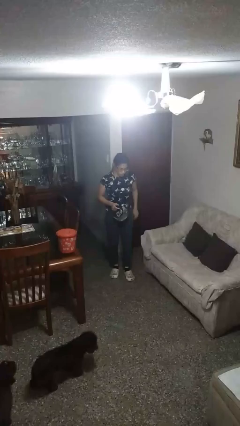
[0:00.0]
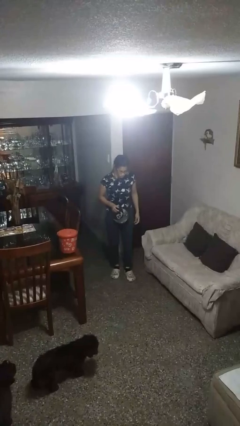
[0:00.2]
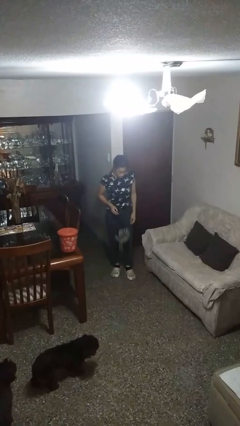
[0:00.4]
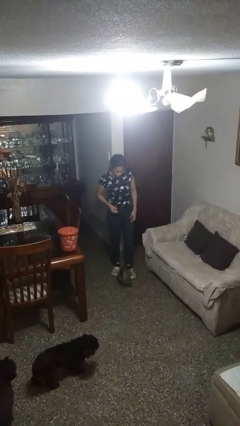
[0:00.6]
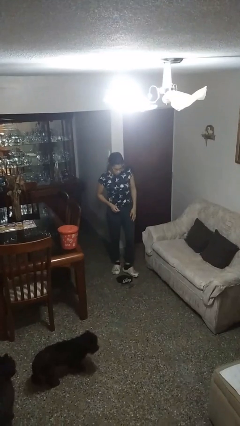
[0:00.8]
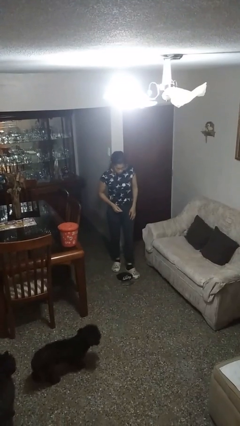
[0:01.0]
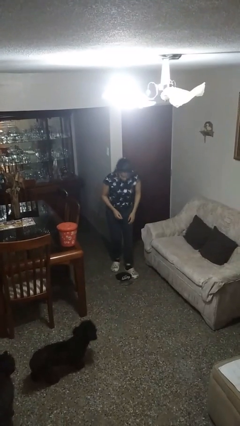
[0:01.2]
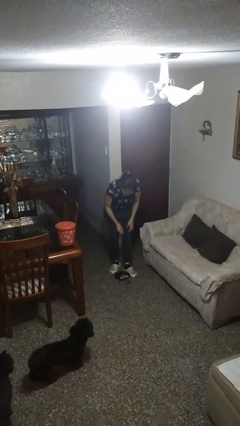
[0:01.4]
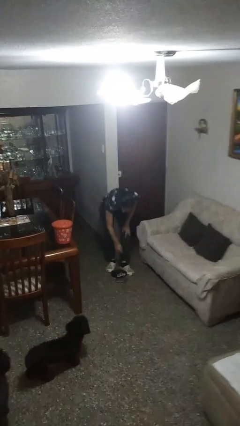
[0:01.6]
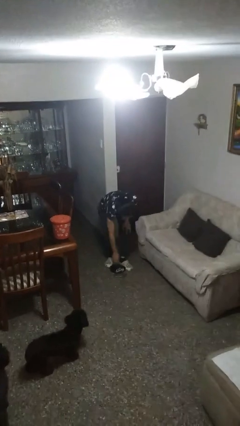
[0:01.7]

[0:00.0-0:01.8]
person drops object

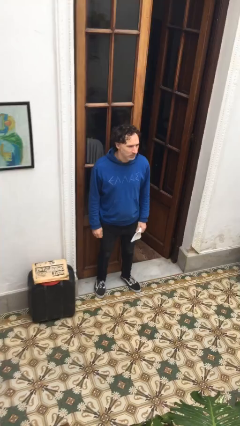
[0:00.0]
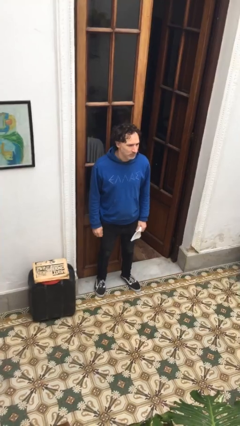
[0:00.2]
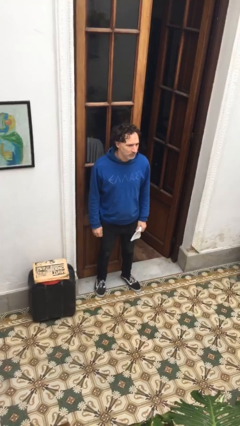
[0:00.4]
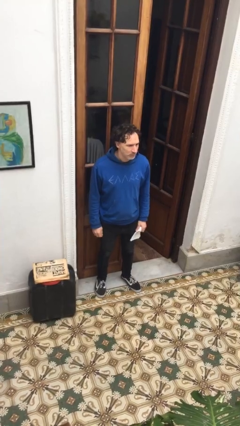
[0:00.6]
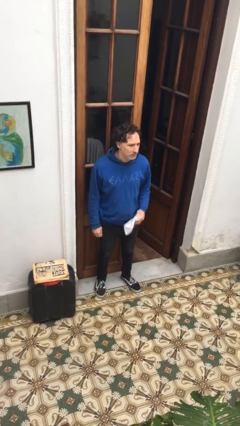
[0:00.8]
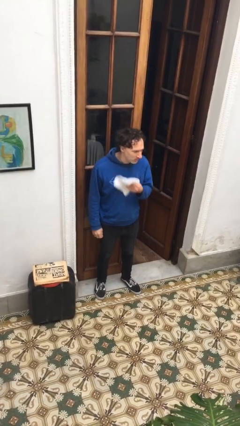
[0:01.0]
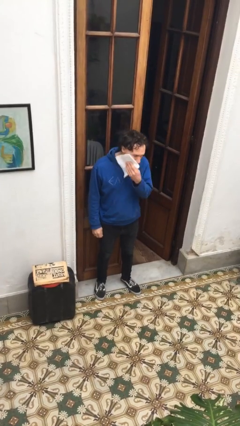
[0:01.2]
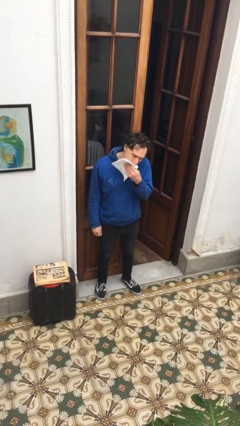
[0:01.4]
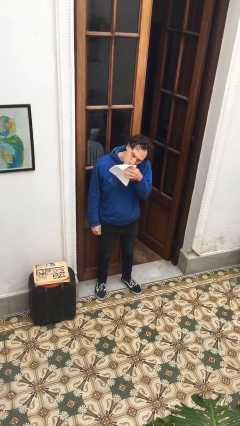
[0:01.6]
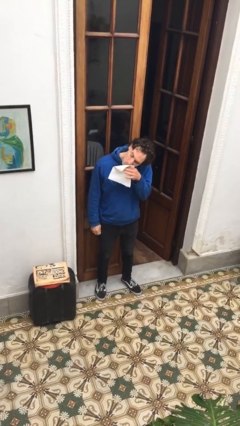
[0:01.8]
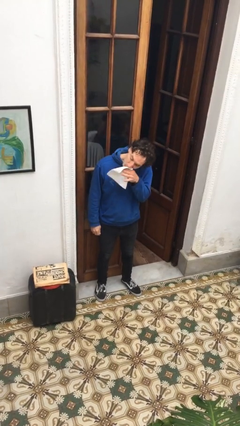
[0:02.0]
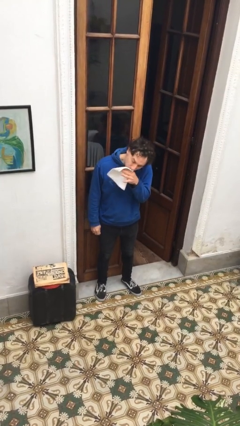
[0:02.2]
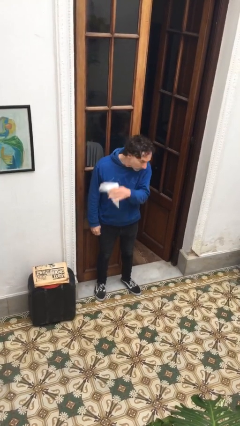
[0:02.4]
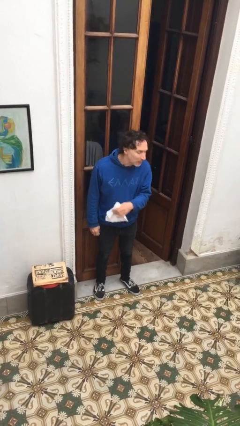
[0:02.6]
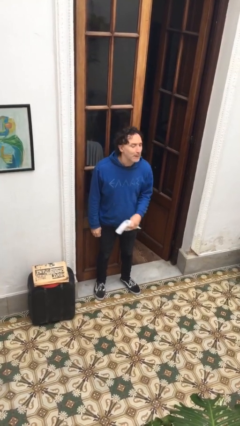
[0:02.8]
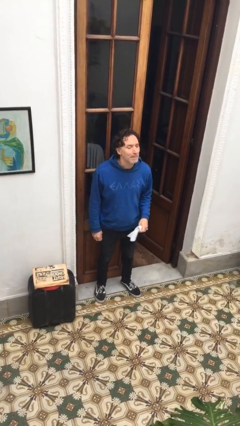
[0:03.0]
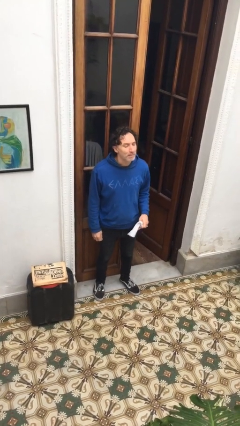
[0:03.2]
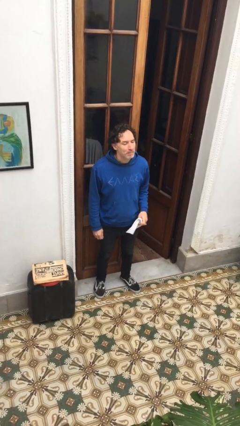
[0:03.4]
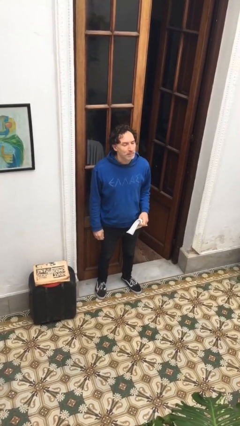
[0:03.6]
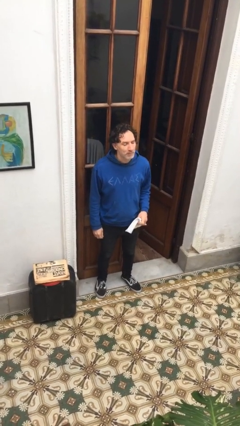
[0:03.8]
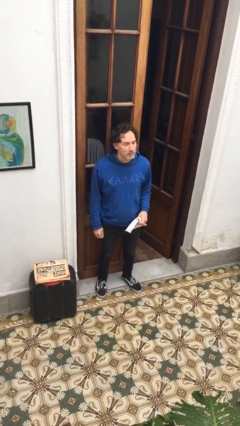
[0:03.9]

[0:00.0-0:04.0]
person wipes mouth with napkin

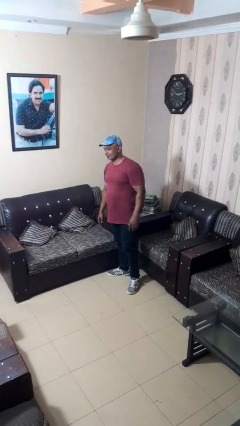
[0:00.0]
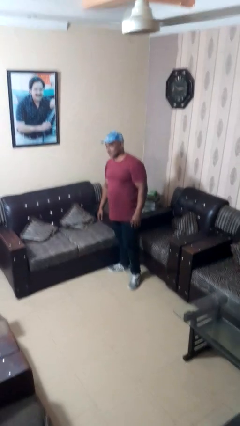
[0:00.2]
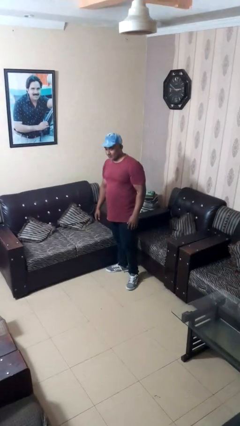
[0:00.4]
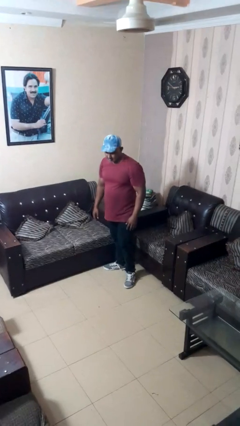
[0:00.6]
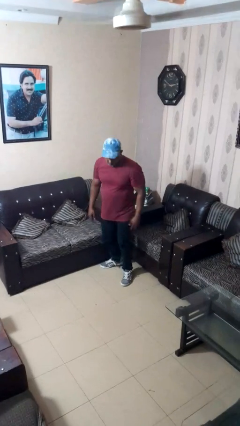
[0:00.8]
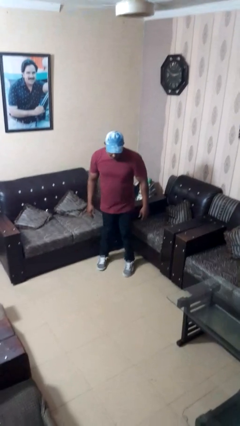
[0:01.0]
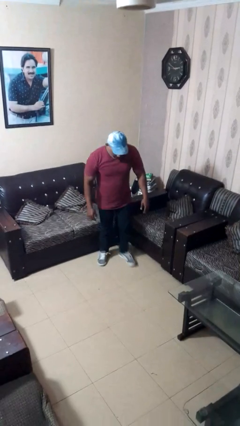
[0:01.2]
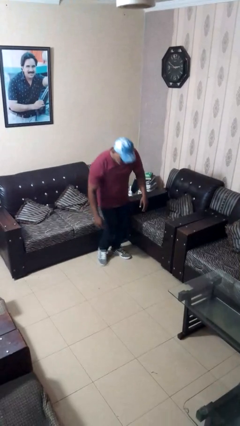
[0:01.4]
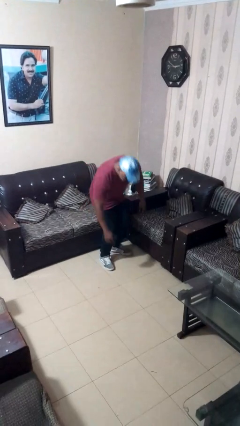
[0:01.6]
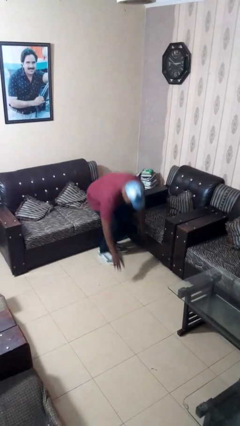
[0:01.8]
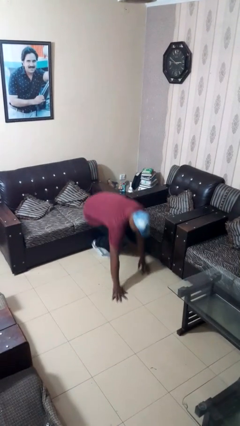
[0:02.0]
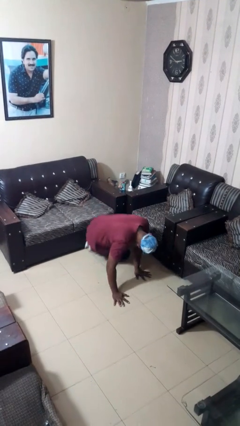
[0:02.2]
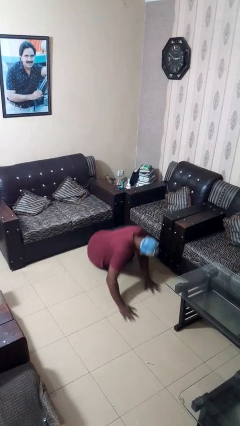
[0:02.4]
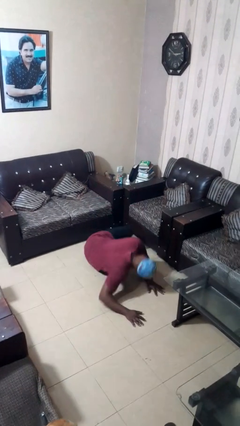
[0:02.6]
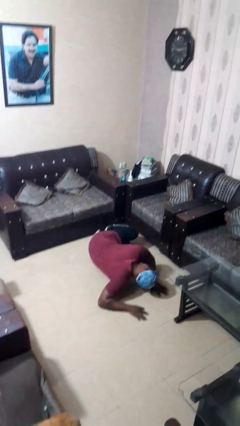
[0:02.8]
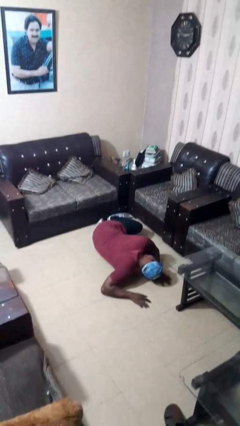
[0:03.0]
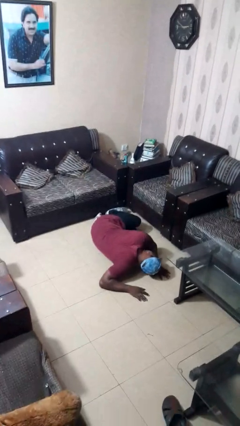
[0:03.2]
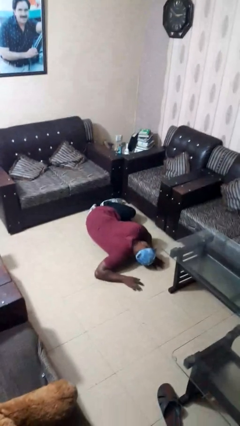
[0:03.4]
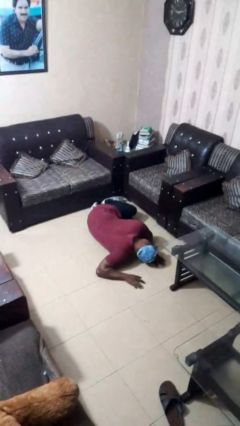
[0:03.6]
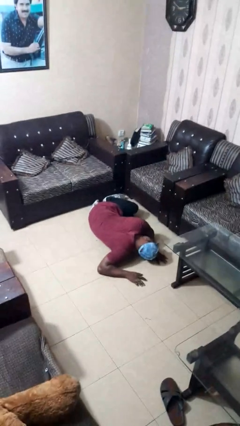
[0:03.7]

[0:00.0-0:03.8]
person falls while standing

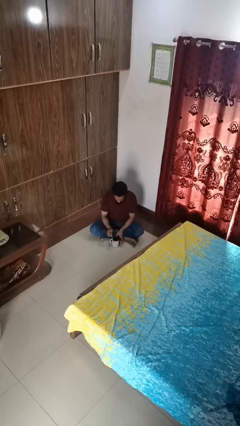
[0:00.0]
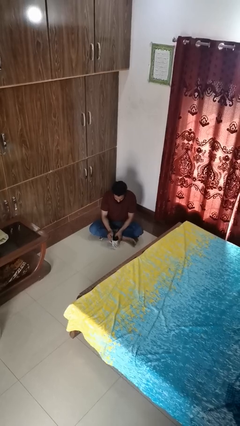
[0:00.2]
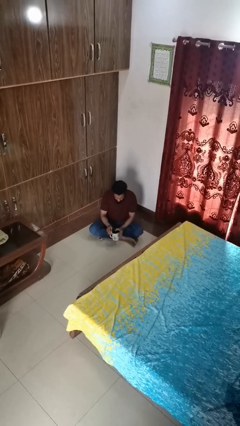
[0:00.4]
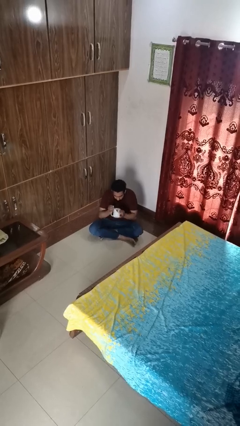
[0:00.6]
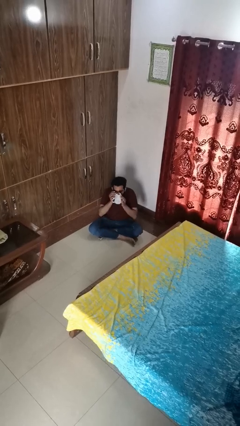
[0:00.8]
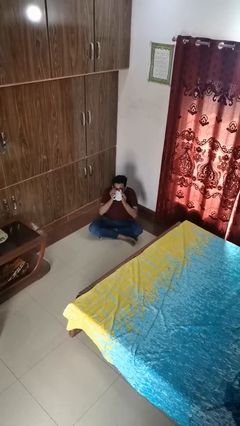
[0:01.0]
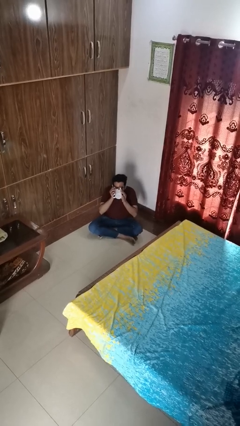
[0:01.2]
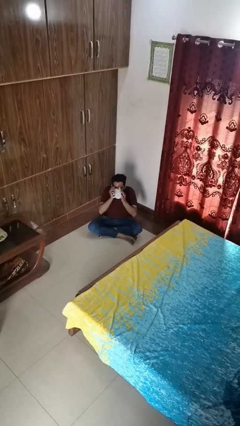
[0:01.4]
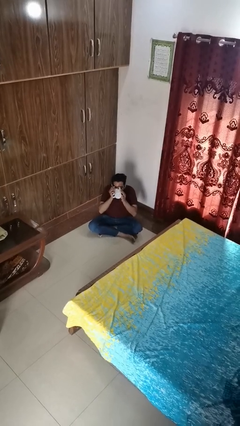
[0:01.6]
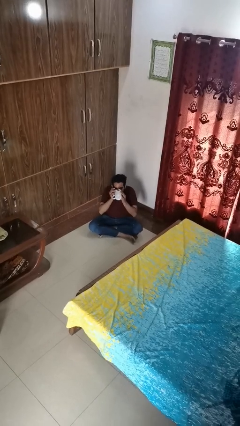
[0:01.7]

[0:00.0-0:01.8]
person drinks from mug

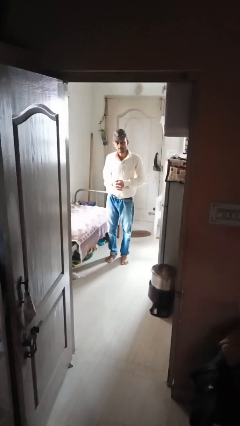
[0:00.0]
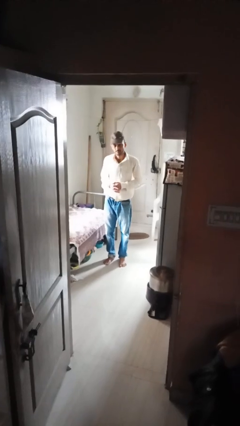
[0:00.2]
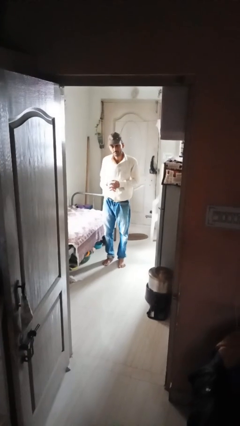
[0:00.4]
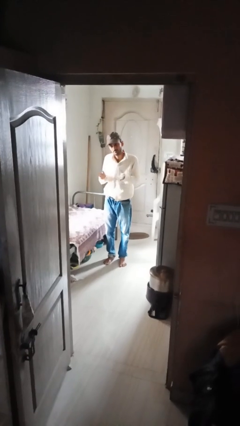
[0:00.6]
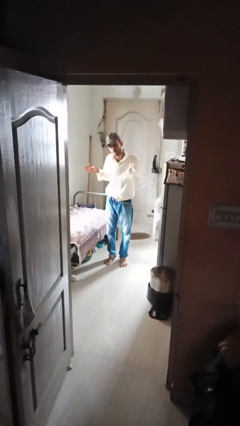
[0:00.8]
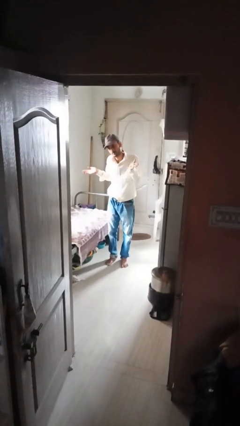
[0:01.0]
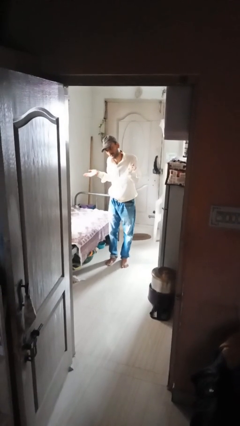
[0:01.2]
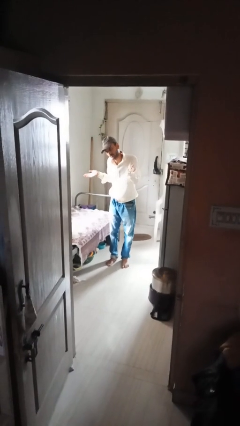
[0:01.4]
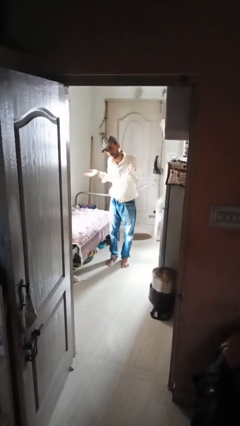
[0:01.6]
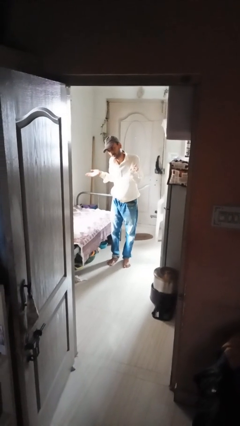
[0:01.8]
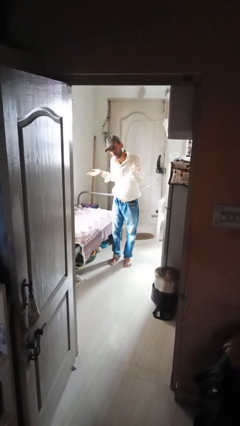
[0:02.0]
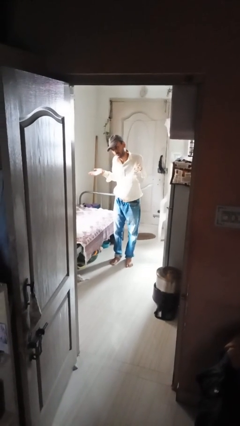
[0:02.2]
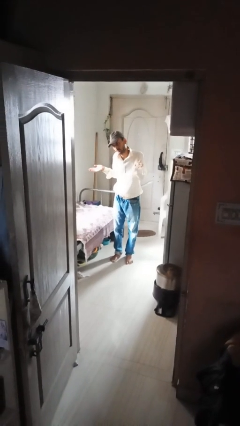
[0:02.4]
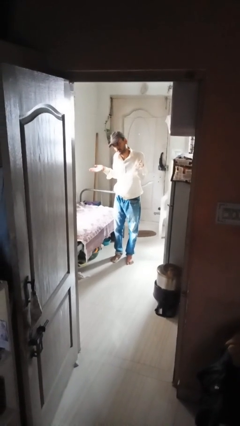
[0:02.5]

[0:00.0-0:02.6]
person shrugs

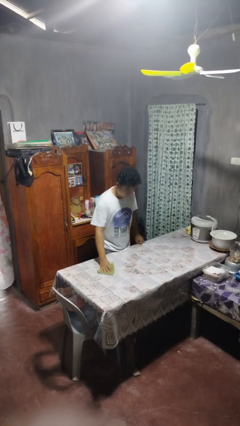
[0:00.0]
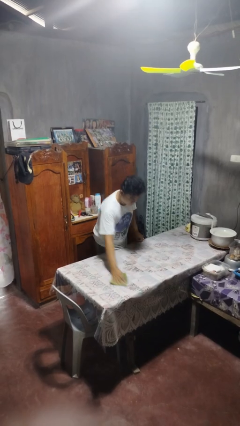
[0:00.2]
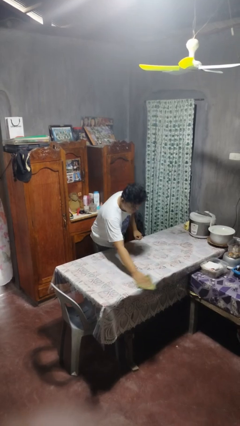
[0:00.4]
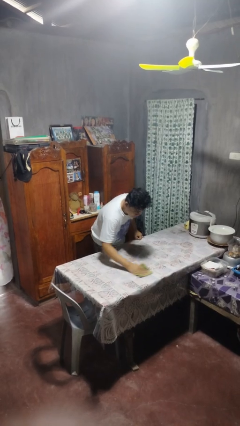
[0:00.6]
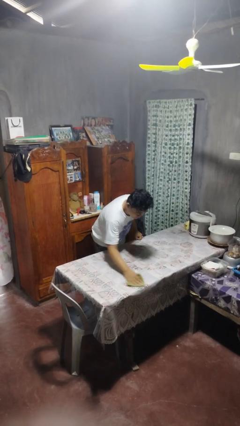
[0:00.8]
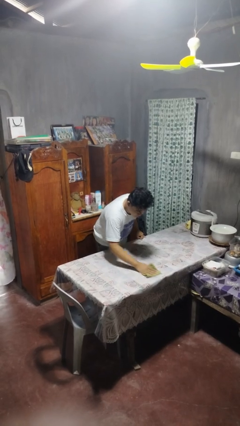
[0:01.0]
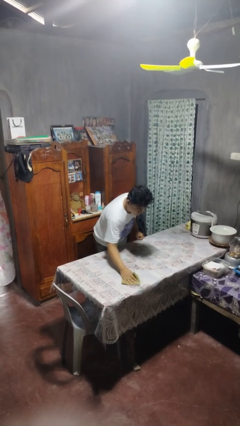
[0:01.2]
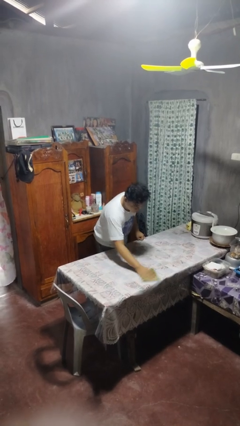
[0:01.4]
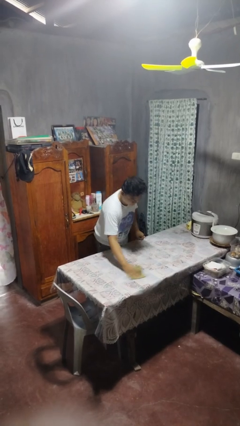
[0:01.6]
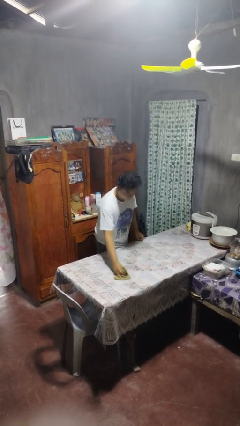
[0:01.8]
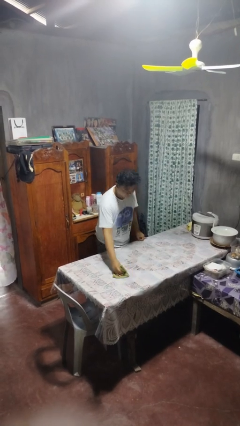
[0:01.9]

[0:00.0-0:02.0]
person cleans table with rag

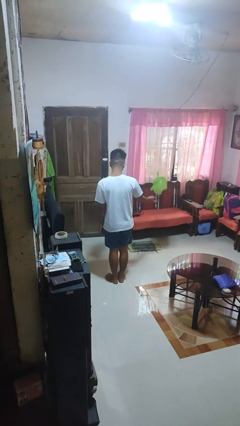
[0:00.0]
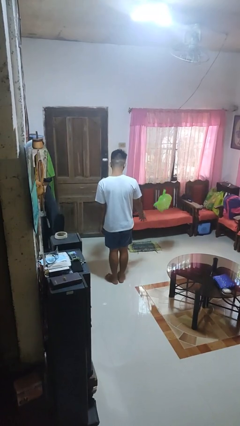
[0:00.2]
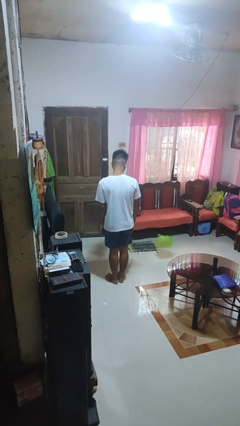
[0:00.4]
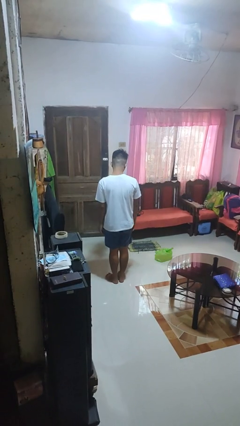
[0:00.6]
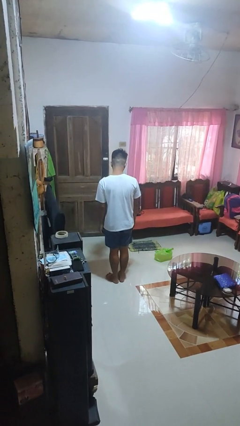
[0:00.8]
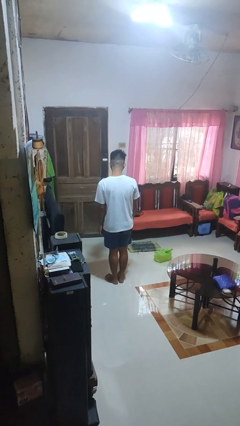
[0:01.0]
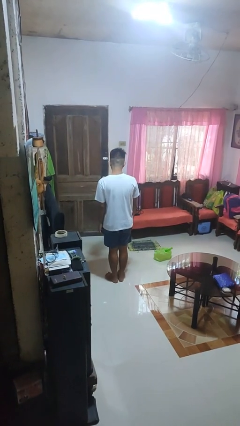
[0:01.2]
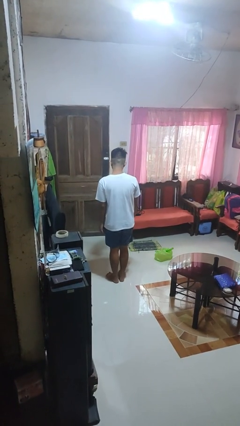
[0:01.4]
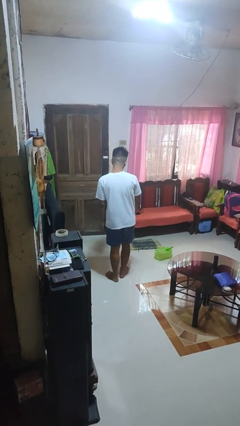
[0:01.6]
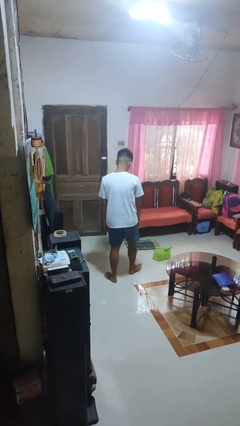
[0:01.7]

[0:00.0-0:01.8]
person throws object to ground
